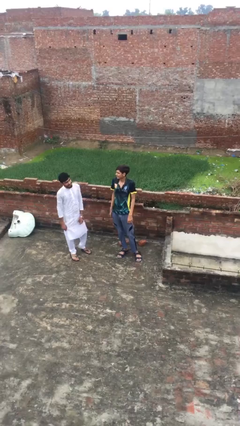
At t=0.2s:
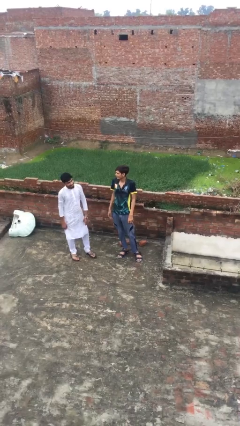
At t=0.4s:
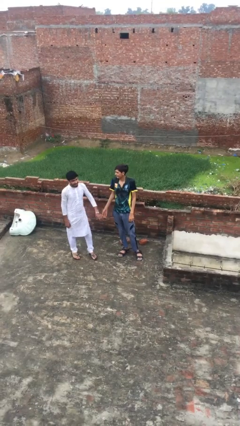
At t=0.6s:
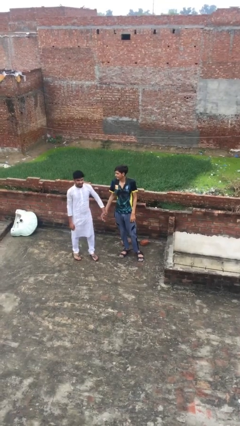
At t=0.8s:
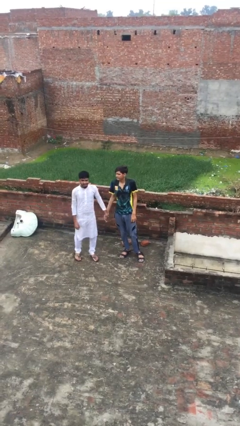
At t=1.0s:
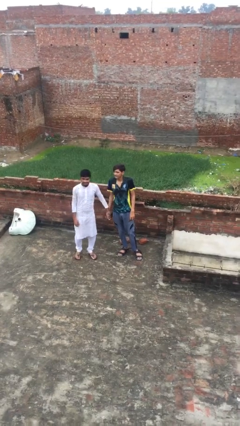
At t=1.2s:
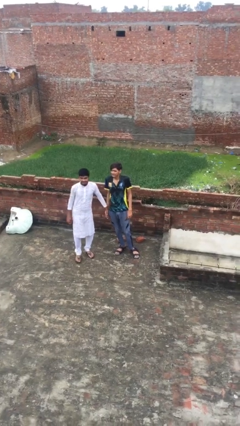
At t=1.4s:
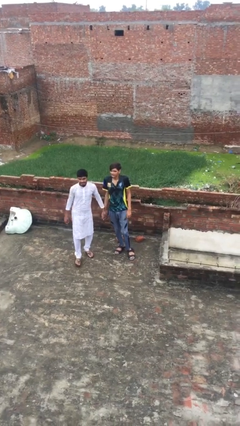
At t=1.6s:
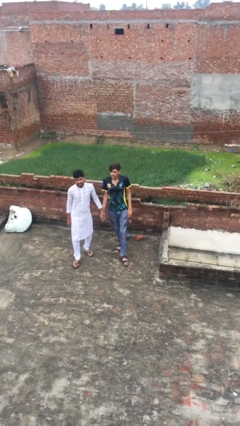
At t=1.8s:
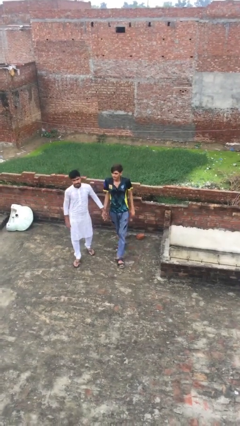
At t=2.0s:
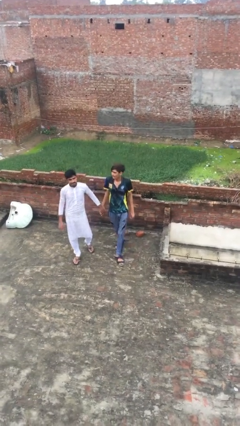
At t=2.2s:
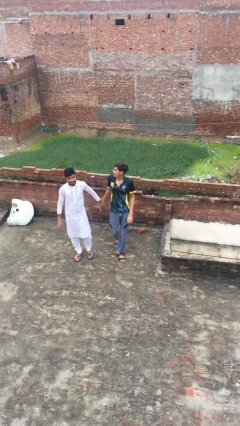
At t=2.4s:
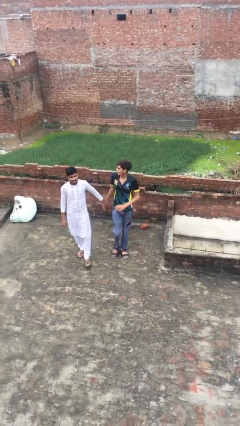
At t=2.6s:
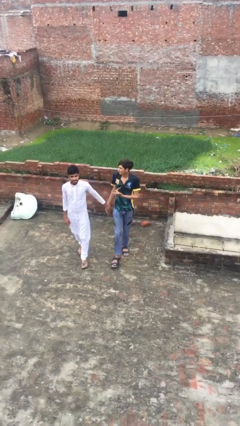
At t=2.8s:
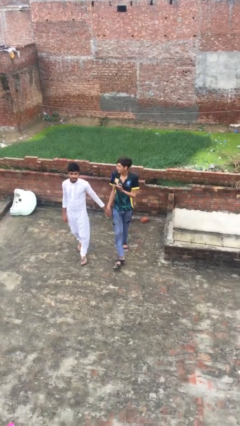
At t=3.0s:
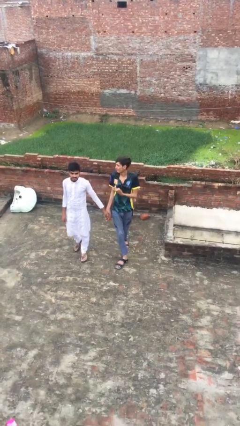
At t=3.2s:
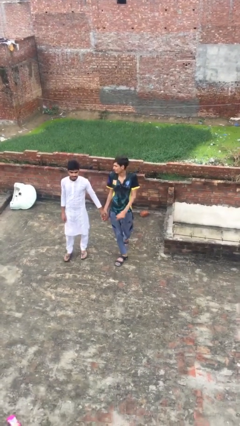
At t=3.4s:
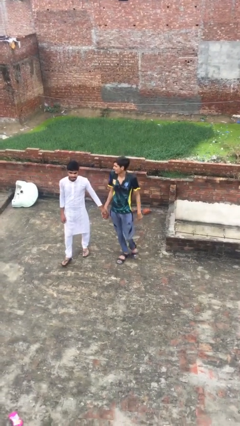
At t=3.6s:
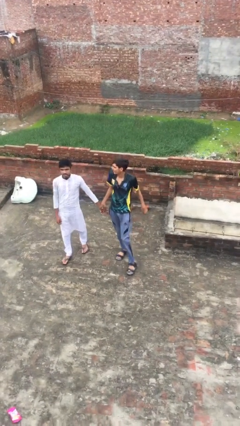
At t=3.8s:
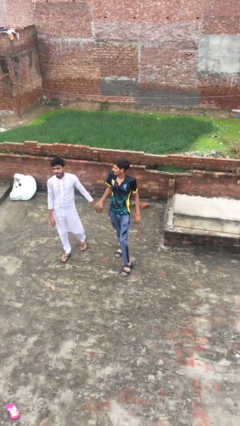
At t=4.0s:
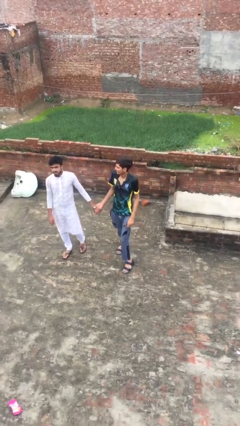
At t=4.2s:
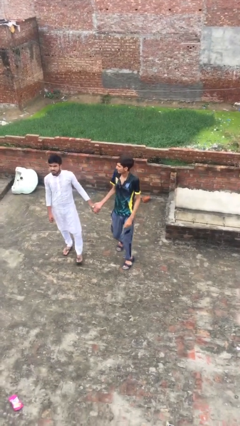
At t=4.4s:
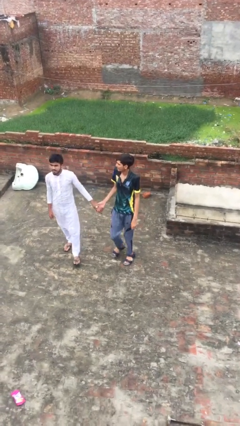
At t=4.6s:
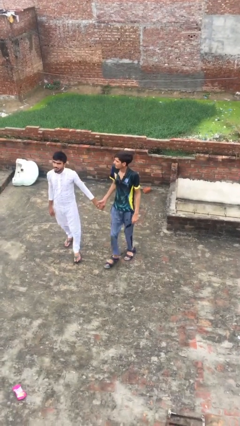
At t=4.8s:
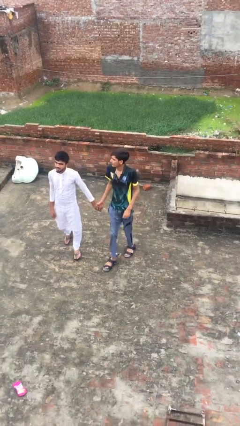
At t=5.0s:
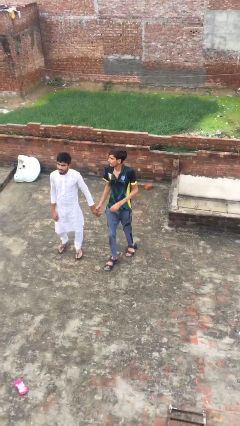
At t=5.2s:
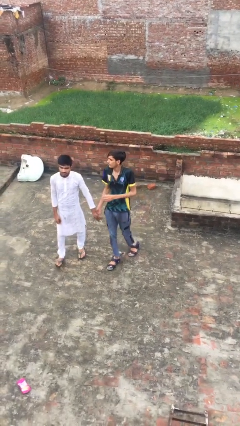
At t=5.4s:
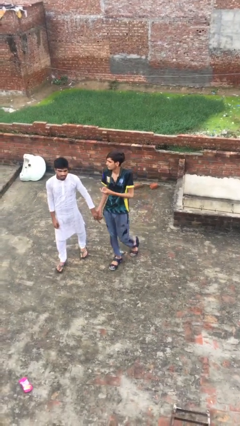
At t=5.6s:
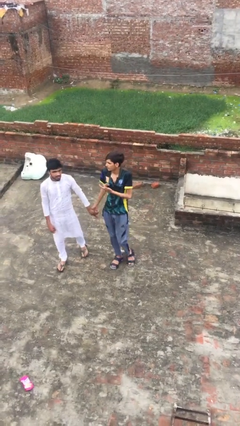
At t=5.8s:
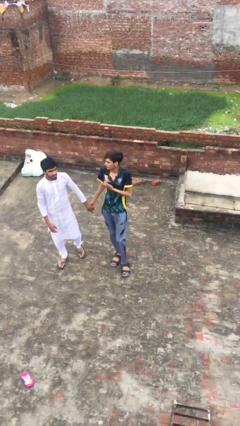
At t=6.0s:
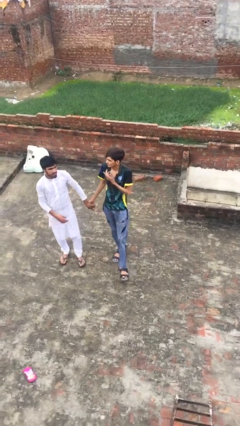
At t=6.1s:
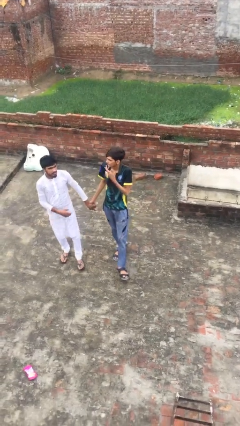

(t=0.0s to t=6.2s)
person holds hand

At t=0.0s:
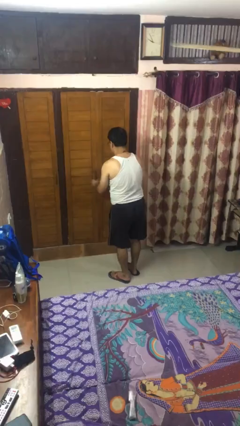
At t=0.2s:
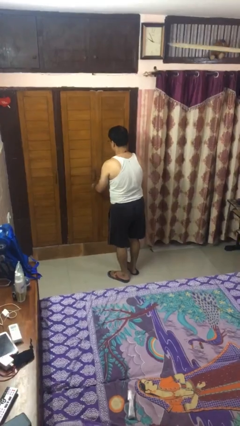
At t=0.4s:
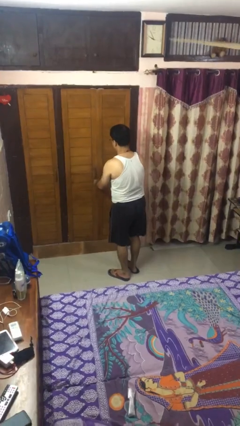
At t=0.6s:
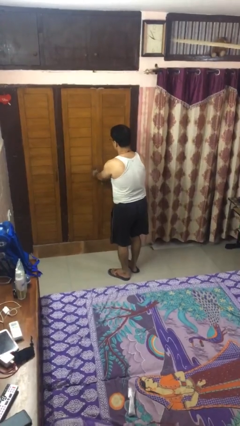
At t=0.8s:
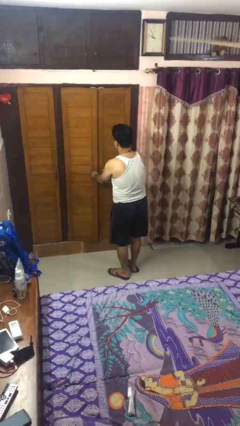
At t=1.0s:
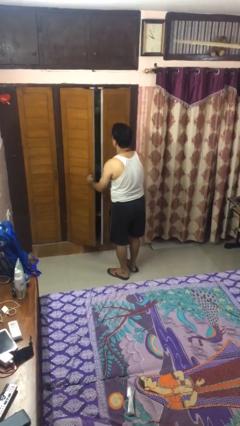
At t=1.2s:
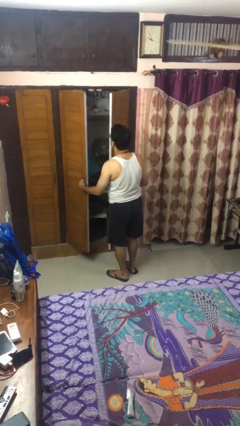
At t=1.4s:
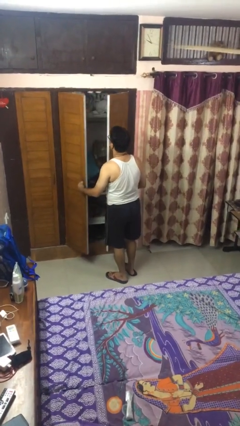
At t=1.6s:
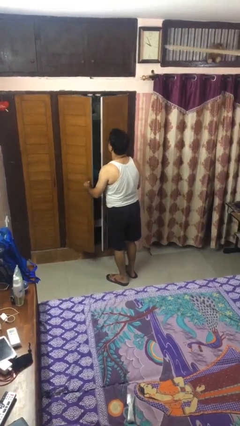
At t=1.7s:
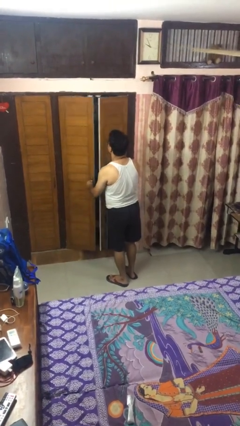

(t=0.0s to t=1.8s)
person opens facility door

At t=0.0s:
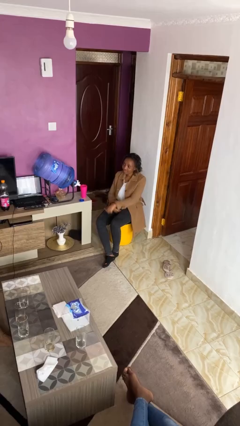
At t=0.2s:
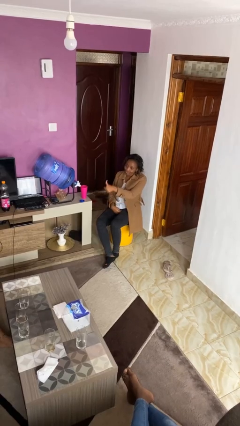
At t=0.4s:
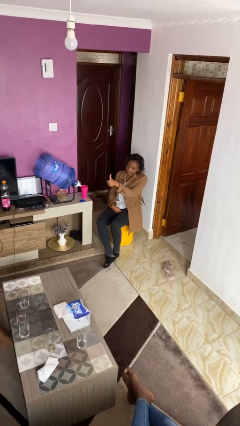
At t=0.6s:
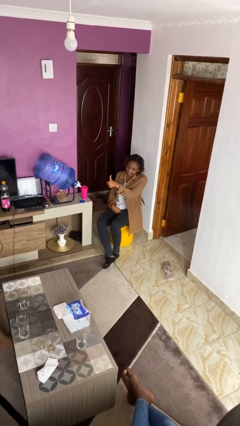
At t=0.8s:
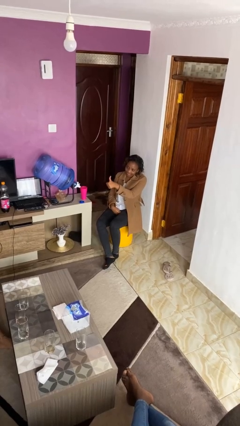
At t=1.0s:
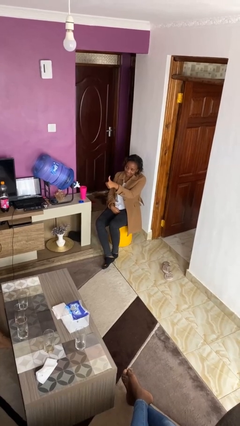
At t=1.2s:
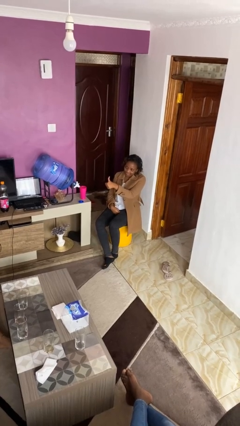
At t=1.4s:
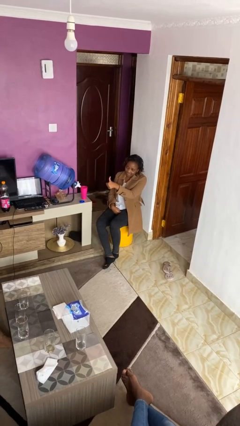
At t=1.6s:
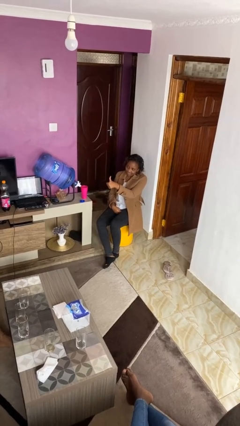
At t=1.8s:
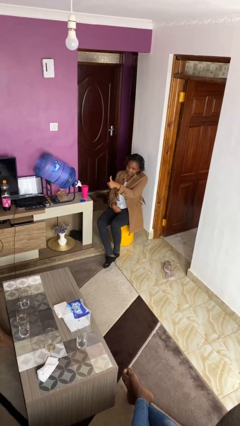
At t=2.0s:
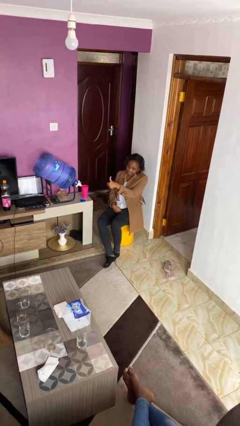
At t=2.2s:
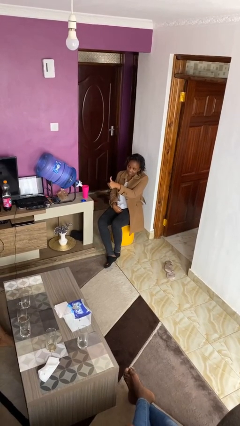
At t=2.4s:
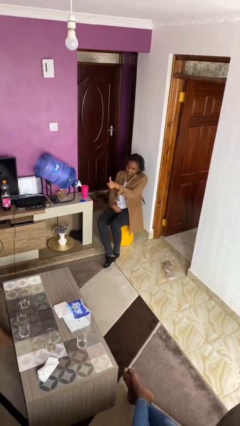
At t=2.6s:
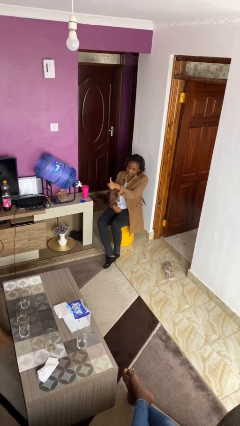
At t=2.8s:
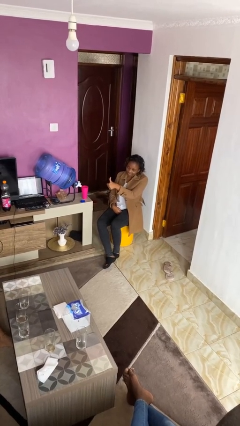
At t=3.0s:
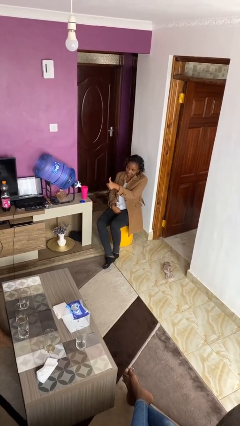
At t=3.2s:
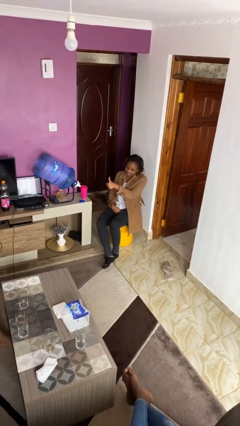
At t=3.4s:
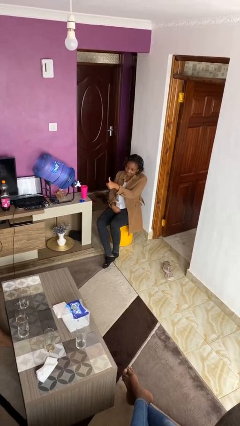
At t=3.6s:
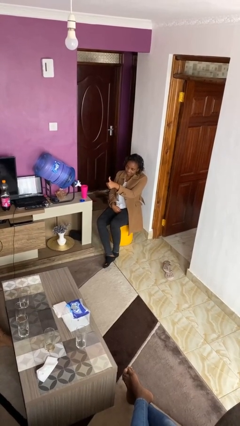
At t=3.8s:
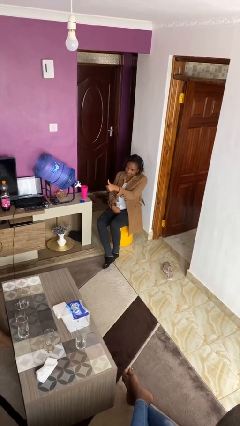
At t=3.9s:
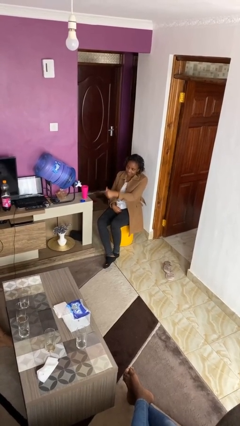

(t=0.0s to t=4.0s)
person gestures thumbs up

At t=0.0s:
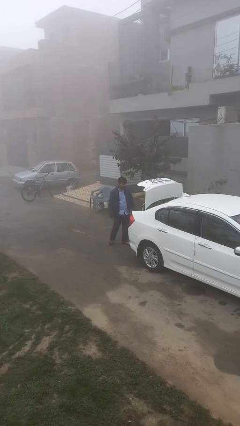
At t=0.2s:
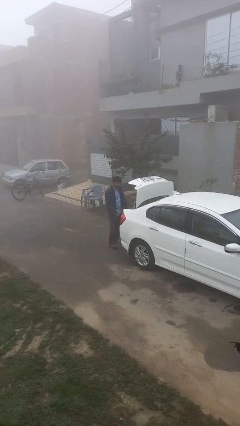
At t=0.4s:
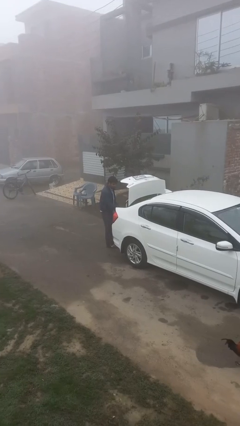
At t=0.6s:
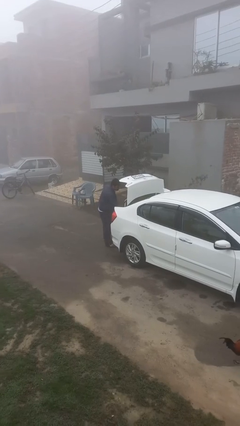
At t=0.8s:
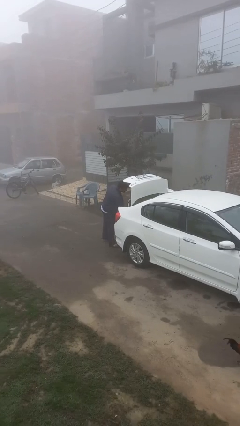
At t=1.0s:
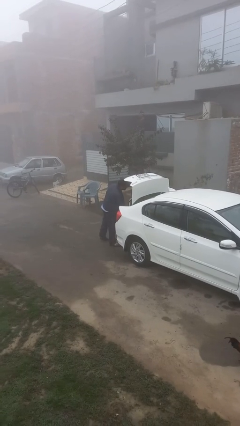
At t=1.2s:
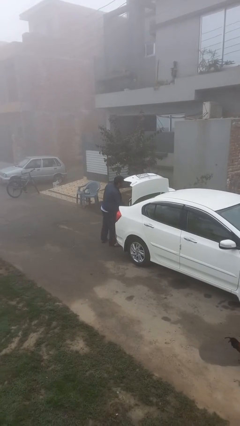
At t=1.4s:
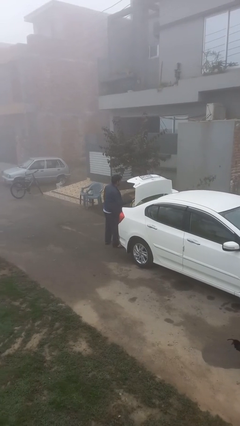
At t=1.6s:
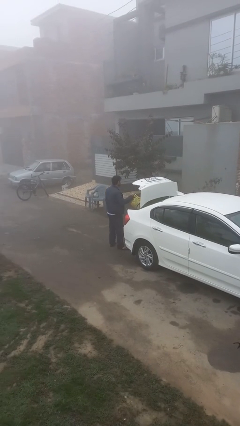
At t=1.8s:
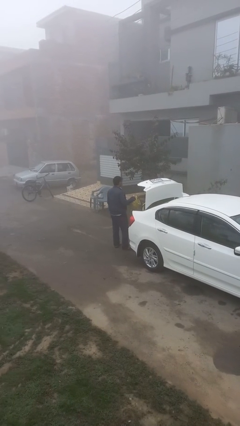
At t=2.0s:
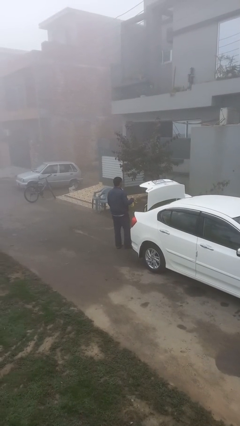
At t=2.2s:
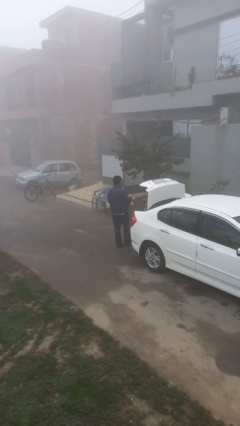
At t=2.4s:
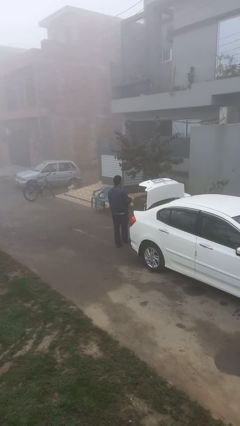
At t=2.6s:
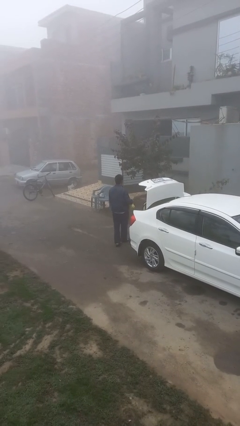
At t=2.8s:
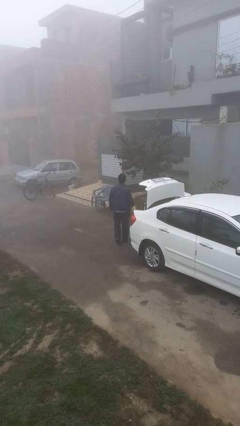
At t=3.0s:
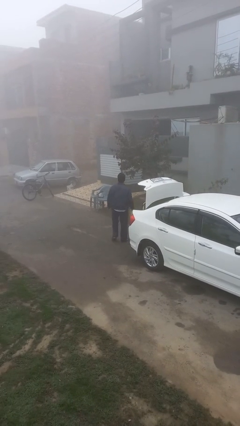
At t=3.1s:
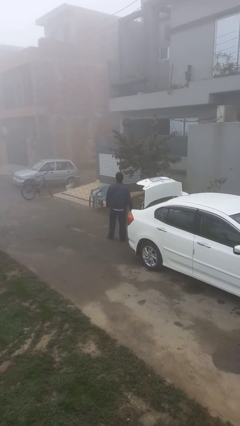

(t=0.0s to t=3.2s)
person unloads car

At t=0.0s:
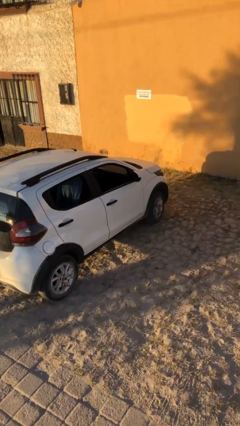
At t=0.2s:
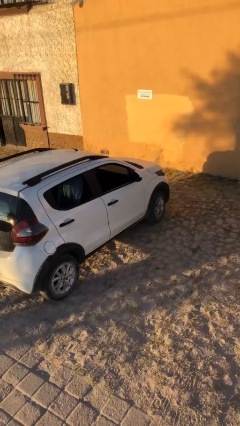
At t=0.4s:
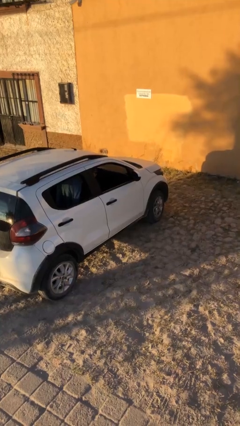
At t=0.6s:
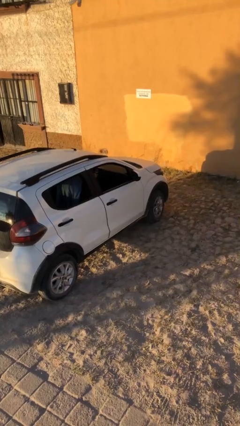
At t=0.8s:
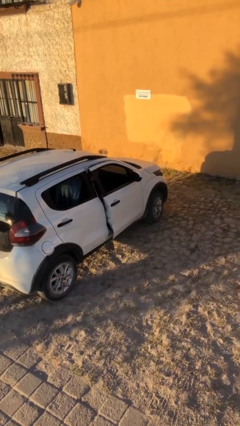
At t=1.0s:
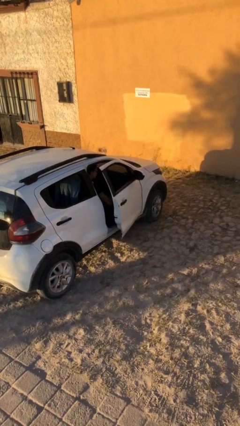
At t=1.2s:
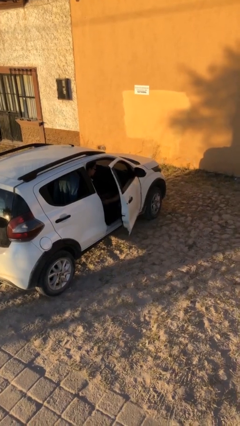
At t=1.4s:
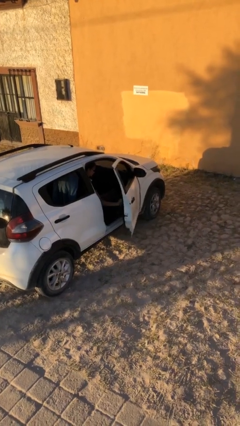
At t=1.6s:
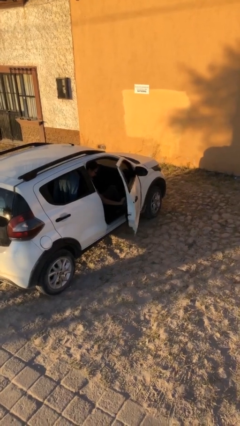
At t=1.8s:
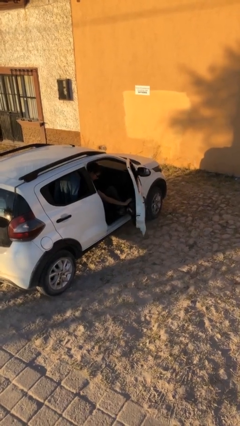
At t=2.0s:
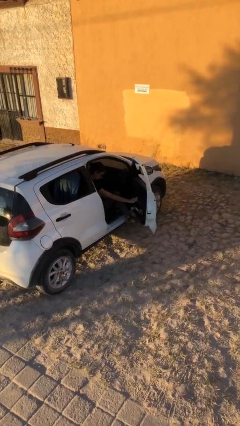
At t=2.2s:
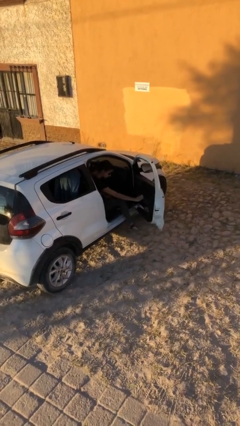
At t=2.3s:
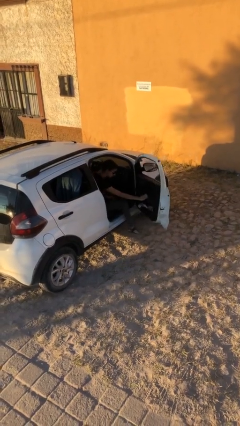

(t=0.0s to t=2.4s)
person opens car door

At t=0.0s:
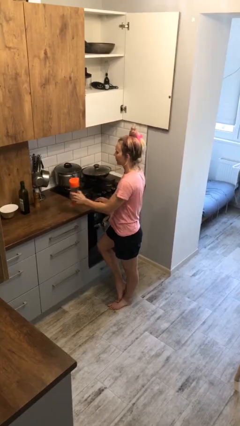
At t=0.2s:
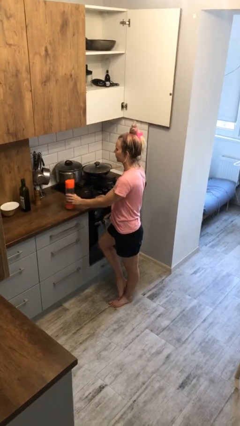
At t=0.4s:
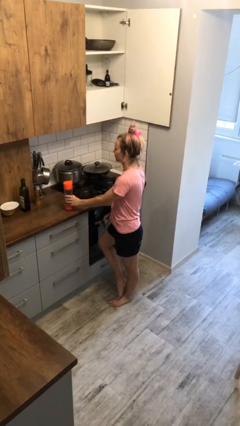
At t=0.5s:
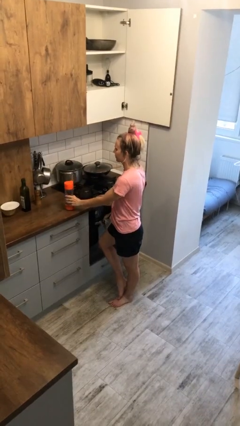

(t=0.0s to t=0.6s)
person puts down object on countertop
